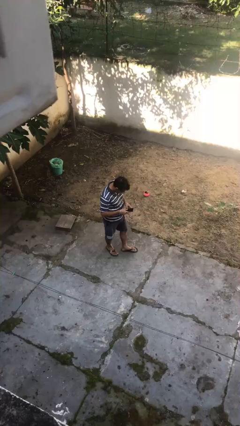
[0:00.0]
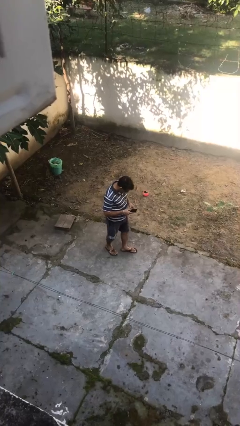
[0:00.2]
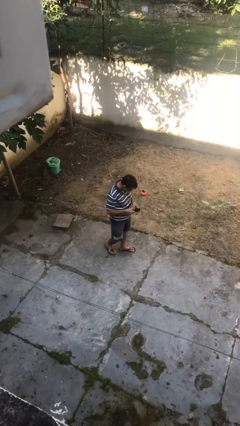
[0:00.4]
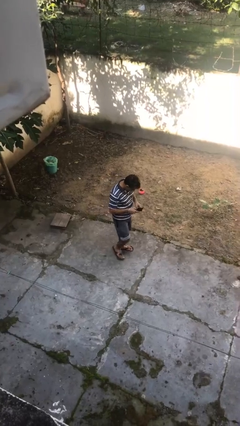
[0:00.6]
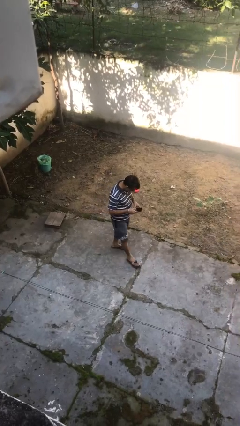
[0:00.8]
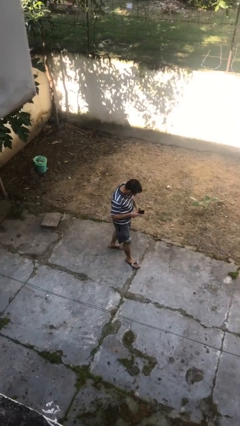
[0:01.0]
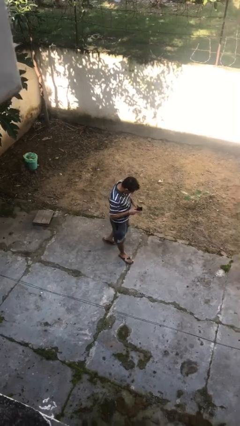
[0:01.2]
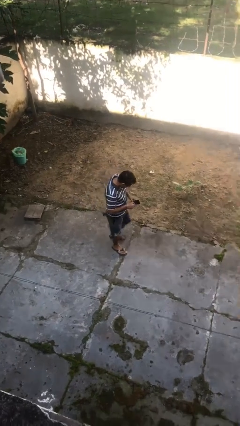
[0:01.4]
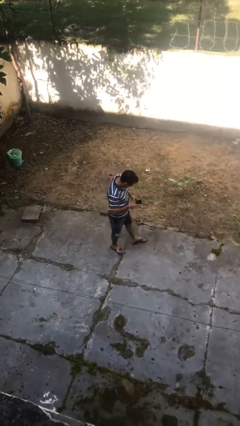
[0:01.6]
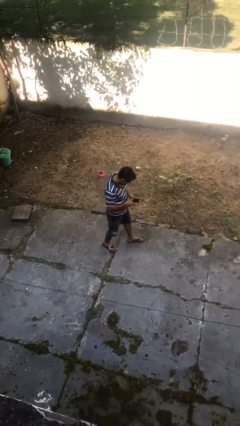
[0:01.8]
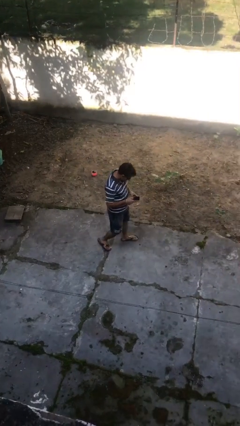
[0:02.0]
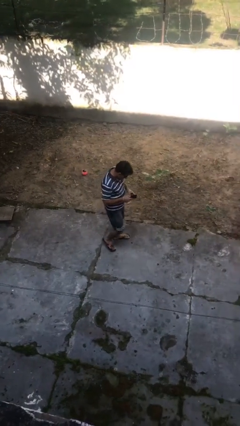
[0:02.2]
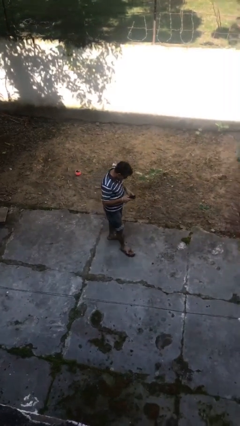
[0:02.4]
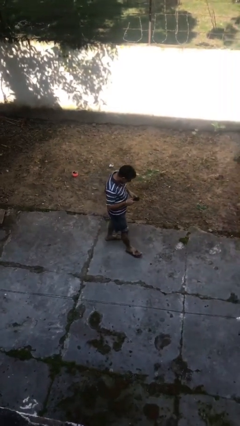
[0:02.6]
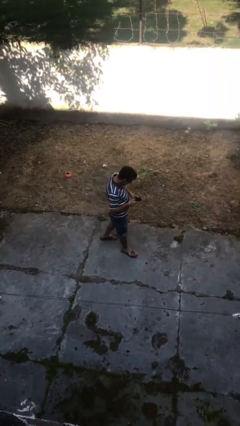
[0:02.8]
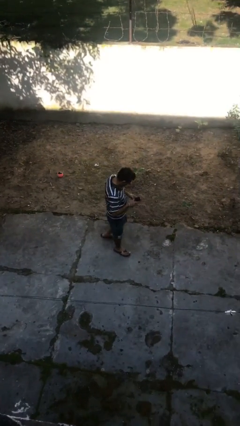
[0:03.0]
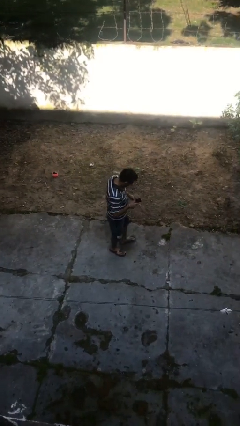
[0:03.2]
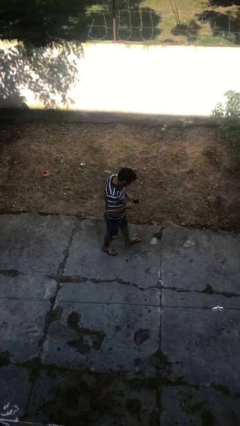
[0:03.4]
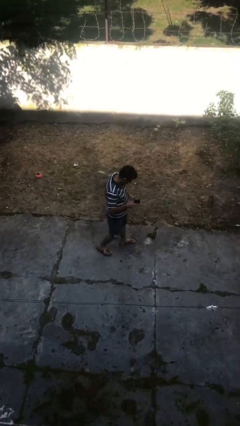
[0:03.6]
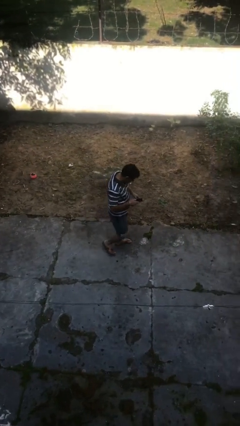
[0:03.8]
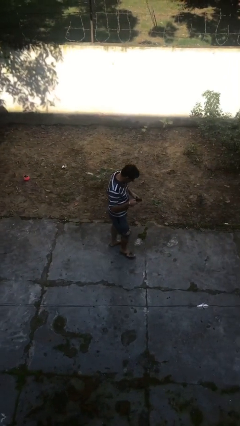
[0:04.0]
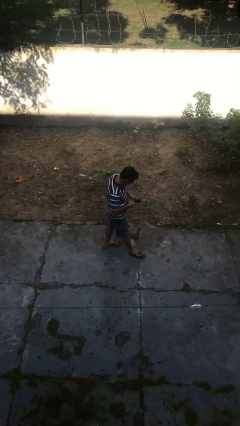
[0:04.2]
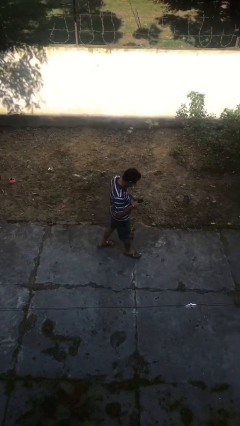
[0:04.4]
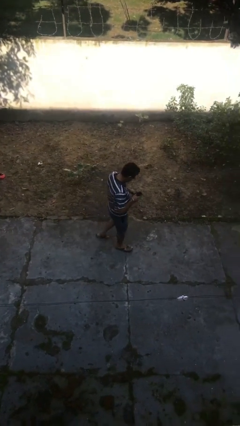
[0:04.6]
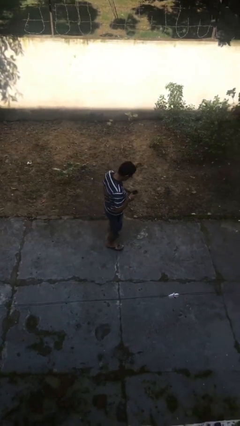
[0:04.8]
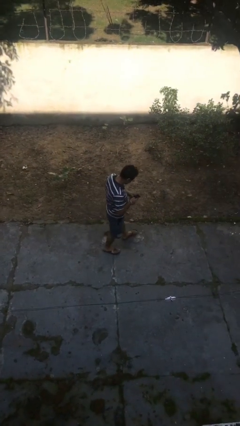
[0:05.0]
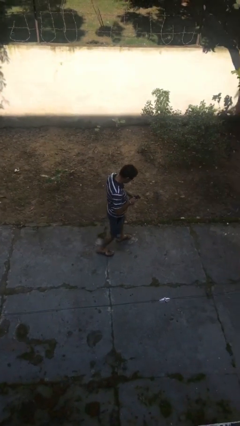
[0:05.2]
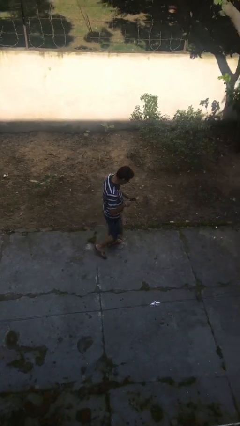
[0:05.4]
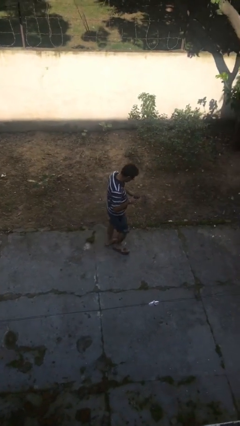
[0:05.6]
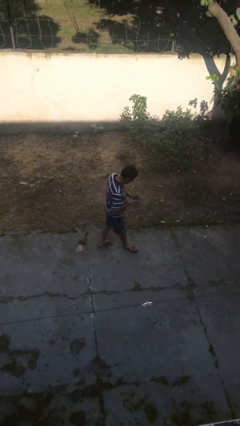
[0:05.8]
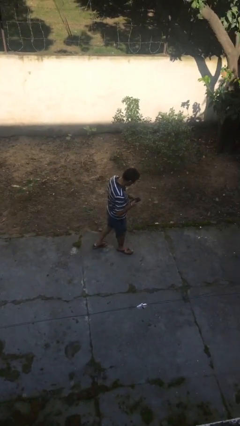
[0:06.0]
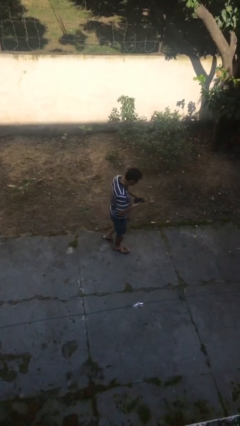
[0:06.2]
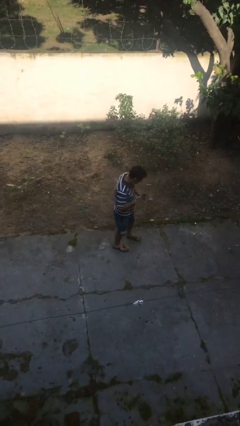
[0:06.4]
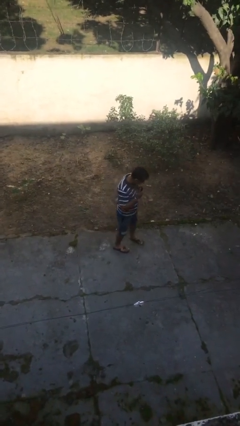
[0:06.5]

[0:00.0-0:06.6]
person texts on phone

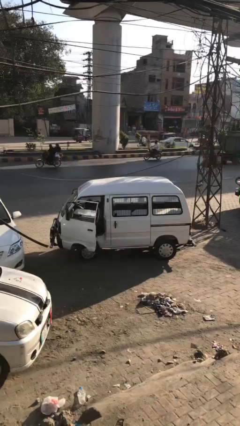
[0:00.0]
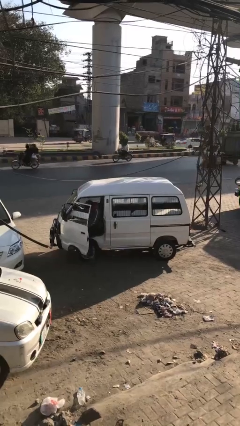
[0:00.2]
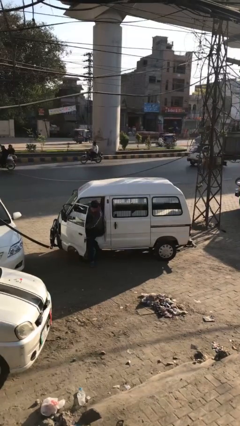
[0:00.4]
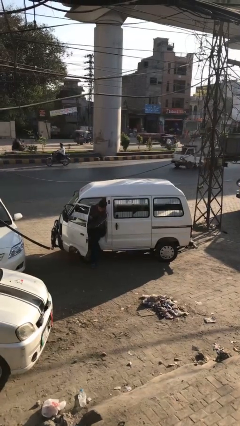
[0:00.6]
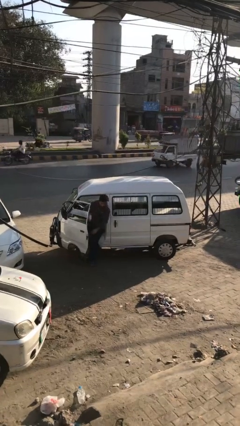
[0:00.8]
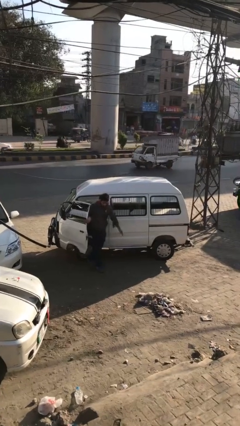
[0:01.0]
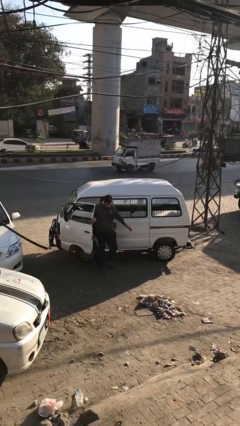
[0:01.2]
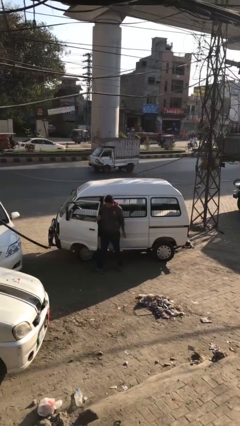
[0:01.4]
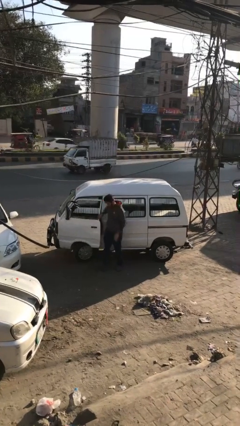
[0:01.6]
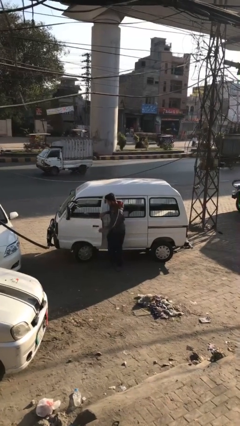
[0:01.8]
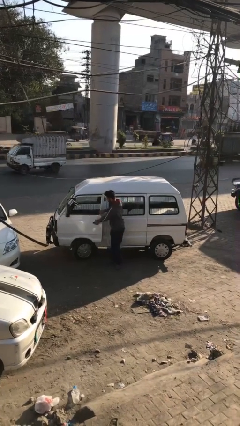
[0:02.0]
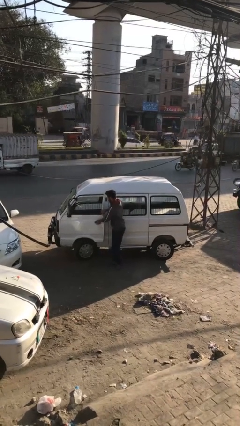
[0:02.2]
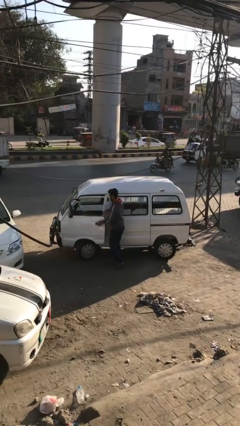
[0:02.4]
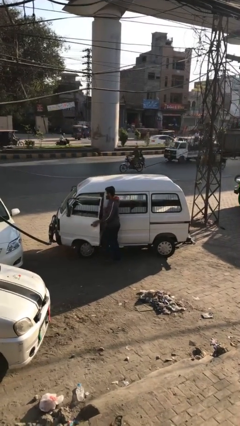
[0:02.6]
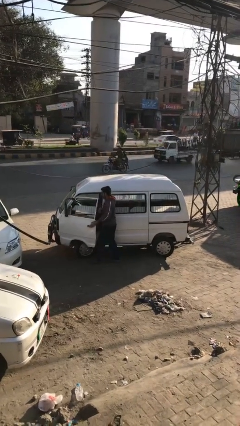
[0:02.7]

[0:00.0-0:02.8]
car drops off person

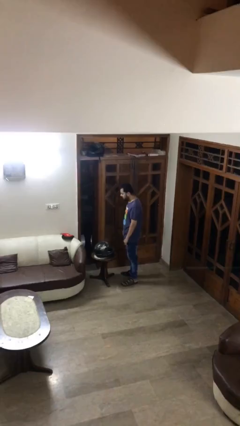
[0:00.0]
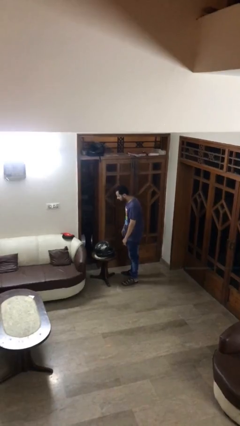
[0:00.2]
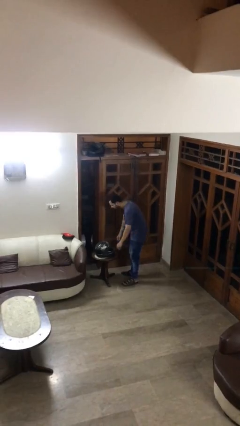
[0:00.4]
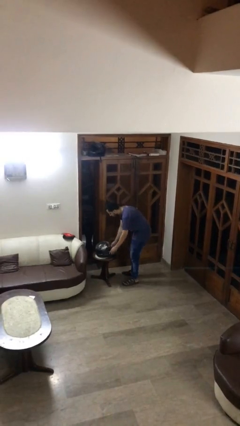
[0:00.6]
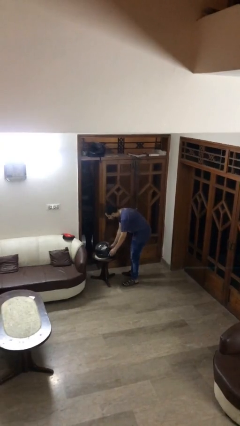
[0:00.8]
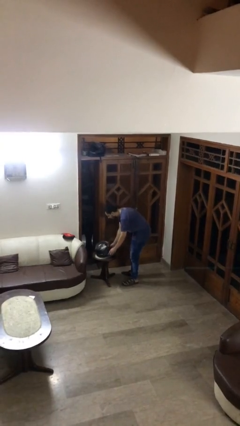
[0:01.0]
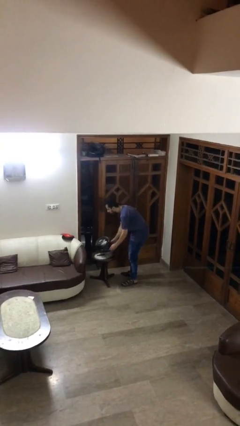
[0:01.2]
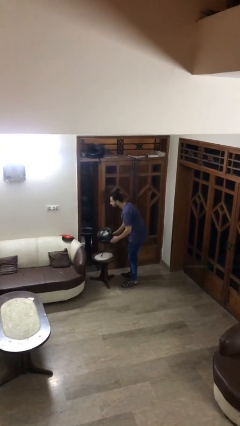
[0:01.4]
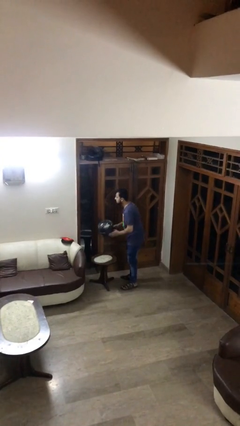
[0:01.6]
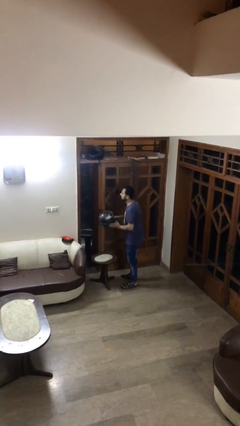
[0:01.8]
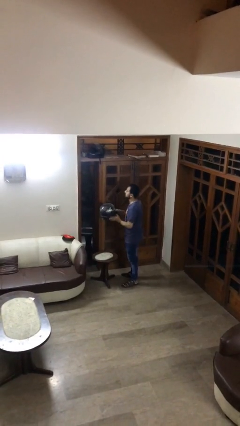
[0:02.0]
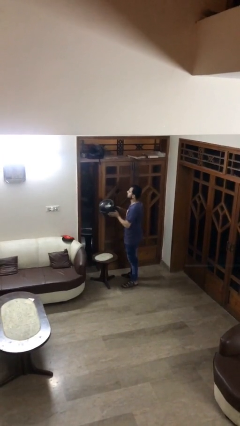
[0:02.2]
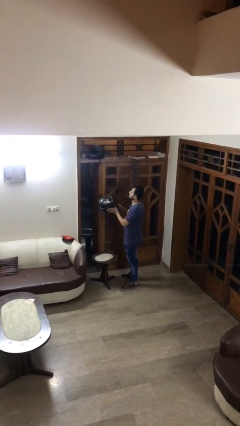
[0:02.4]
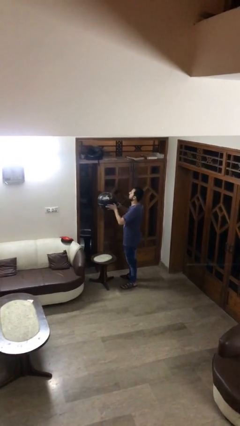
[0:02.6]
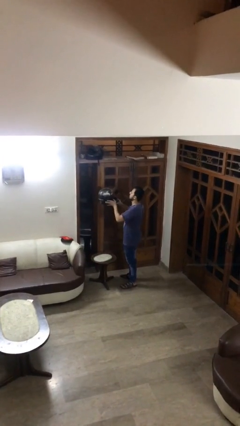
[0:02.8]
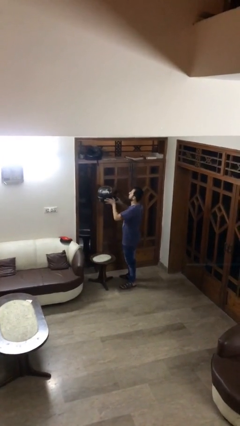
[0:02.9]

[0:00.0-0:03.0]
person picks up object from table

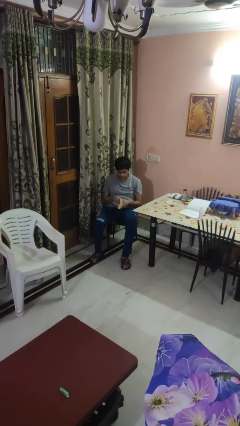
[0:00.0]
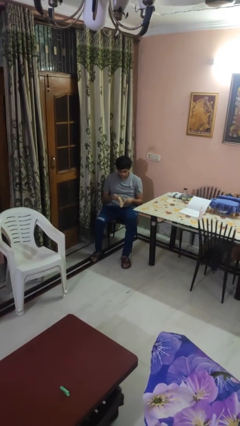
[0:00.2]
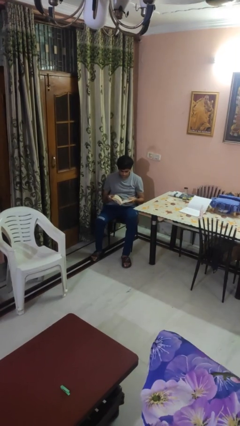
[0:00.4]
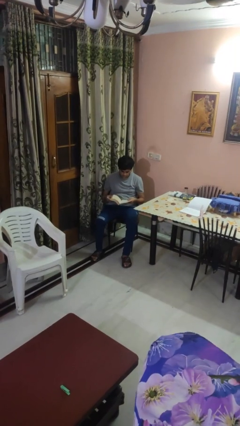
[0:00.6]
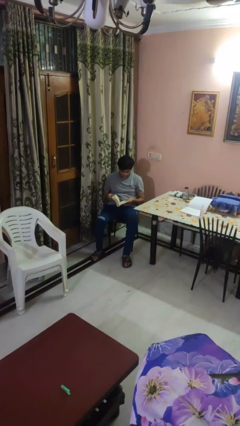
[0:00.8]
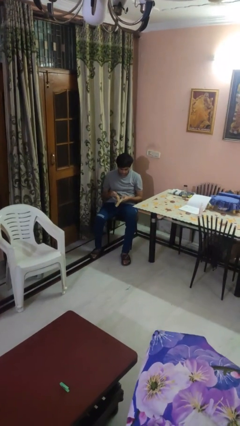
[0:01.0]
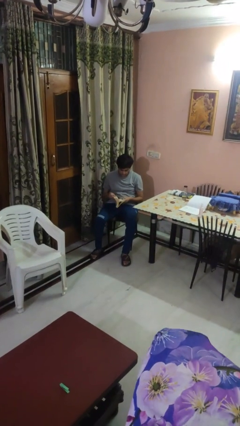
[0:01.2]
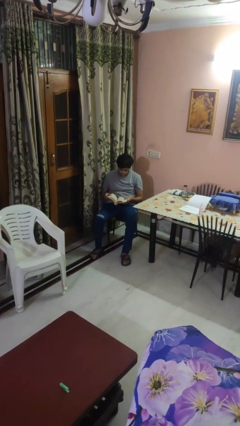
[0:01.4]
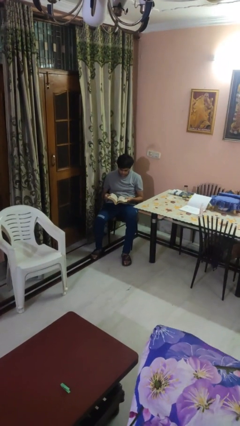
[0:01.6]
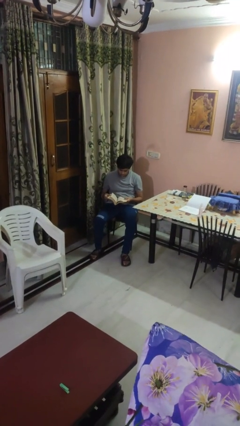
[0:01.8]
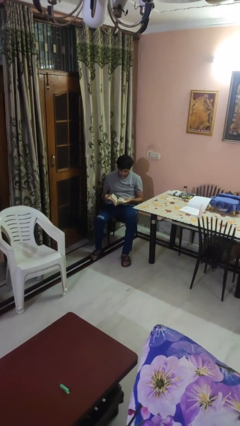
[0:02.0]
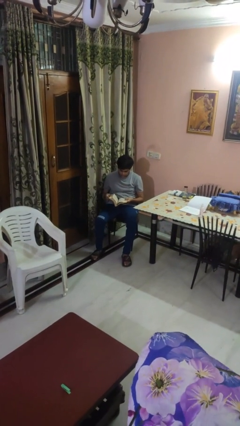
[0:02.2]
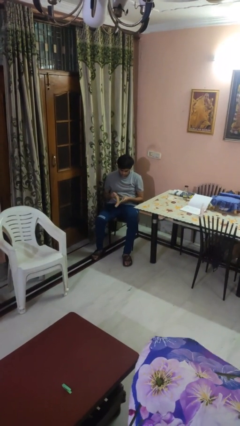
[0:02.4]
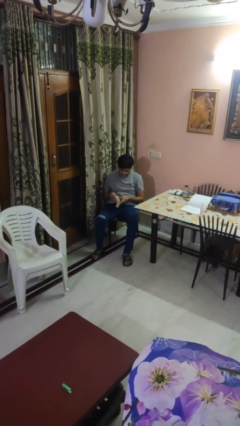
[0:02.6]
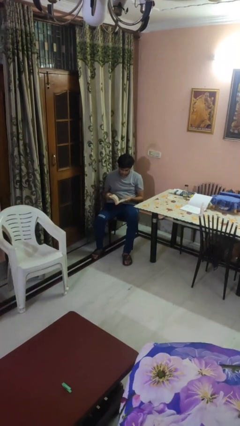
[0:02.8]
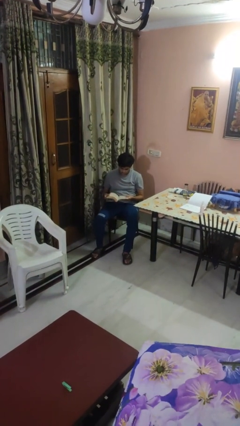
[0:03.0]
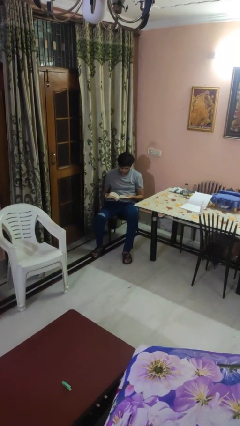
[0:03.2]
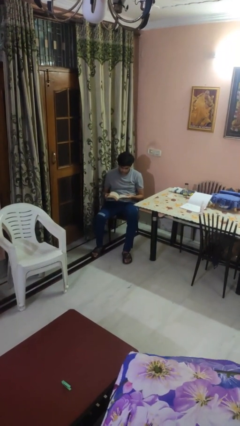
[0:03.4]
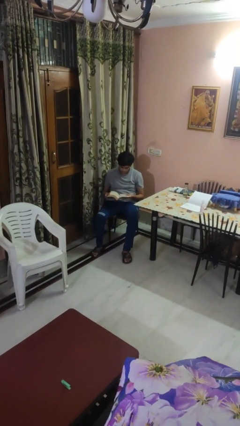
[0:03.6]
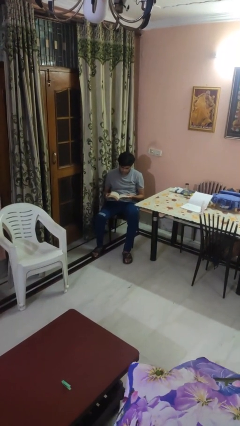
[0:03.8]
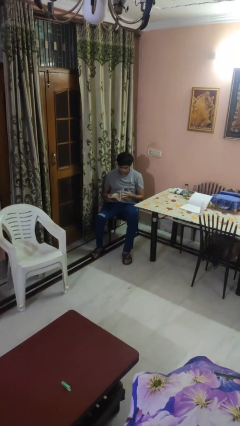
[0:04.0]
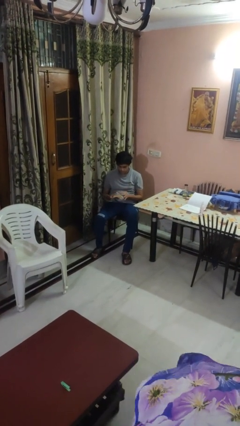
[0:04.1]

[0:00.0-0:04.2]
person reads book

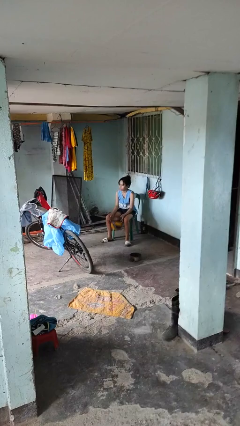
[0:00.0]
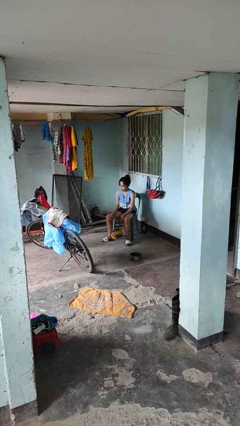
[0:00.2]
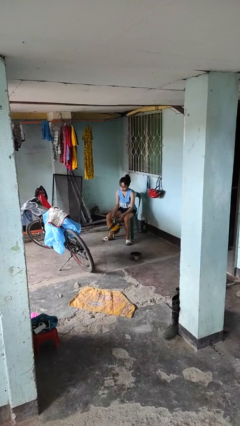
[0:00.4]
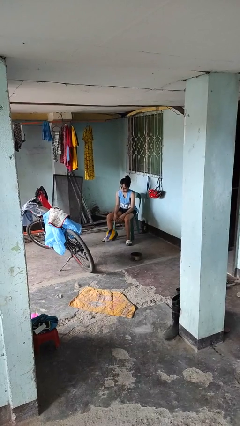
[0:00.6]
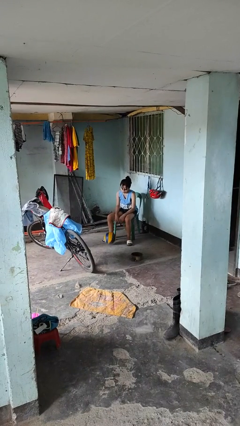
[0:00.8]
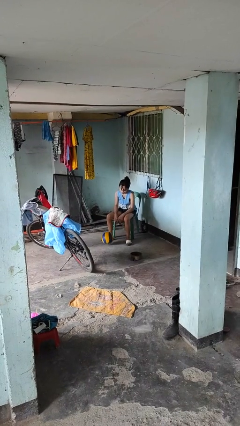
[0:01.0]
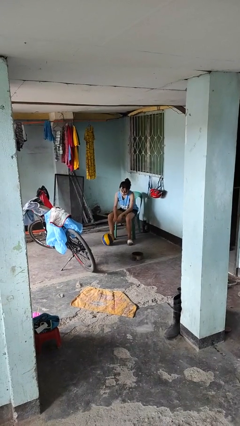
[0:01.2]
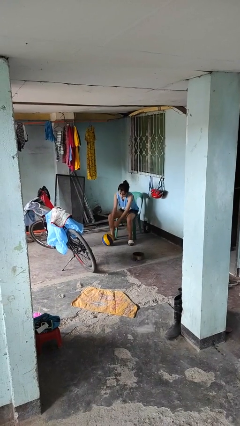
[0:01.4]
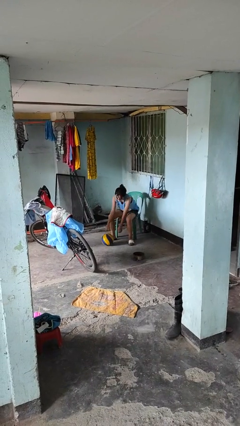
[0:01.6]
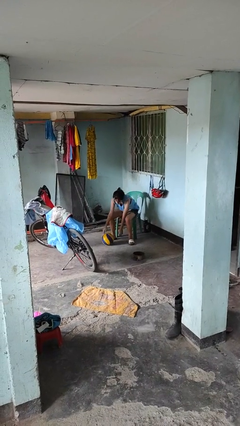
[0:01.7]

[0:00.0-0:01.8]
person drops object
